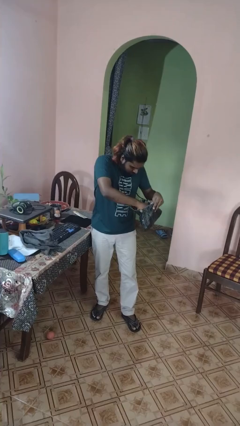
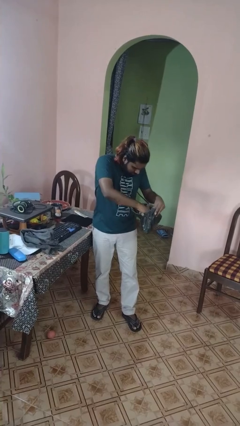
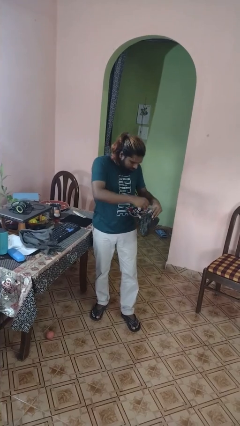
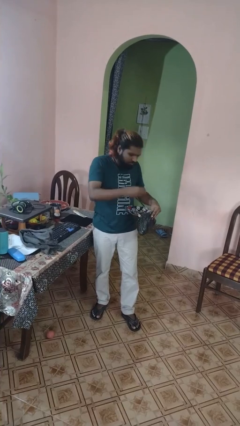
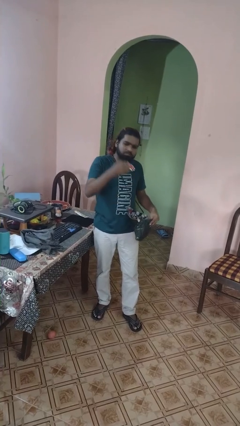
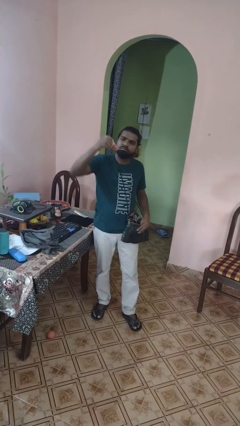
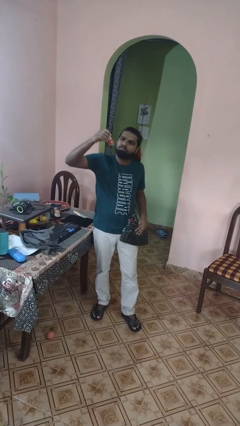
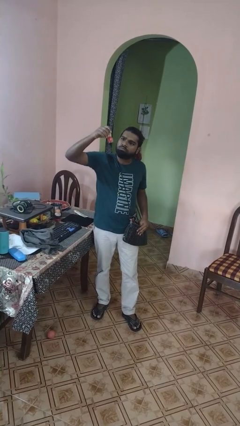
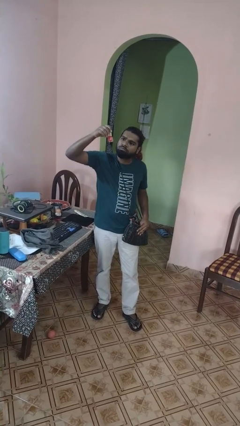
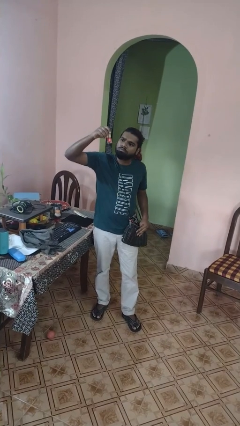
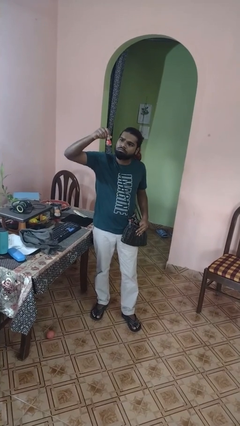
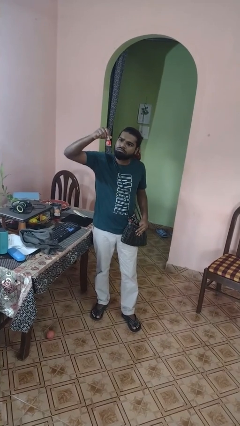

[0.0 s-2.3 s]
person takes object from purse

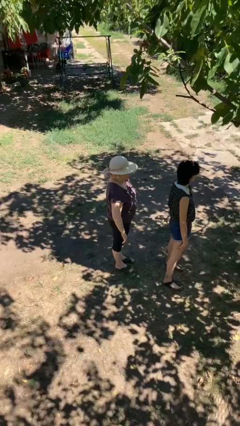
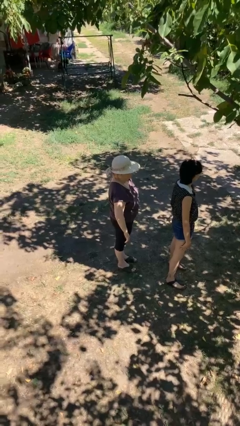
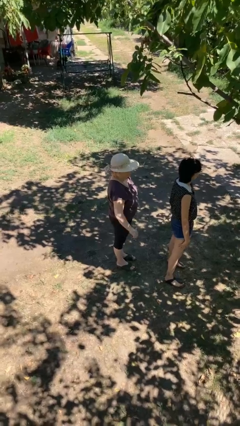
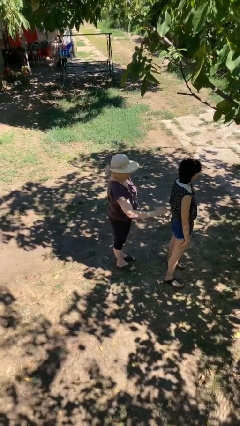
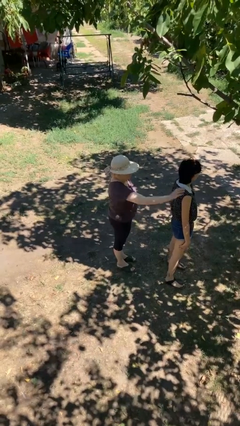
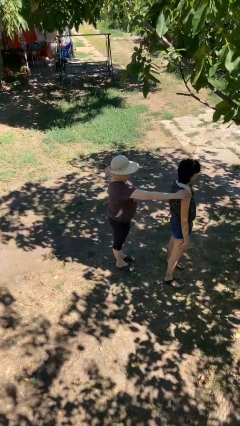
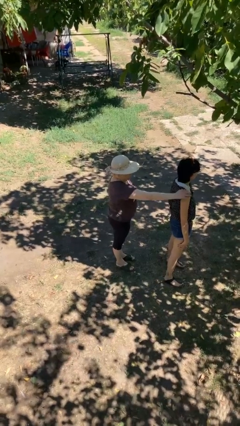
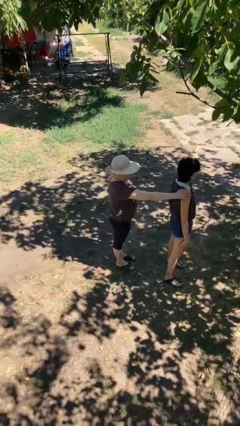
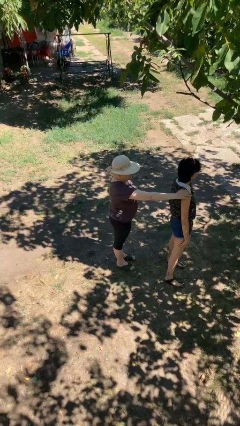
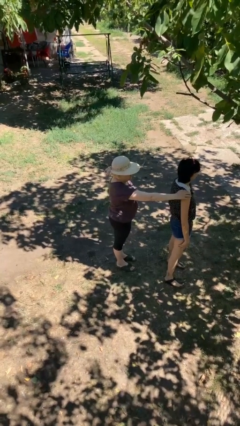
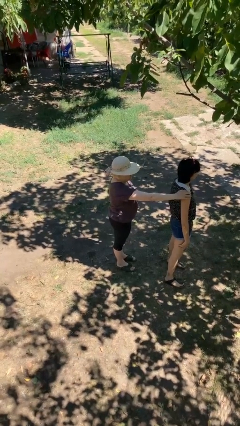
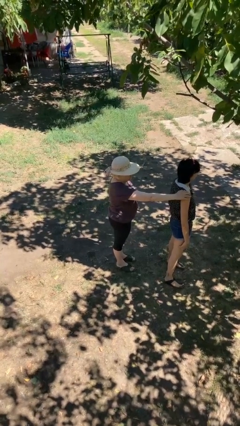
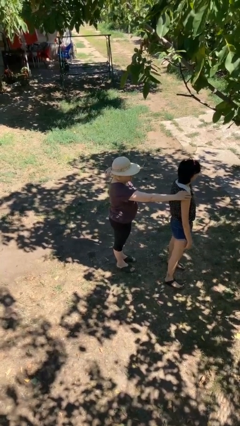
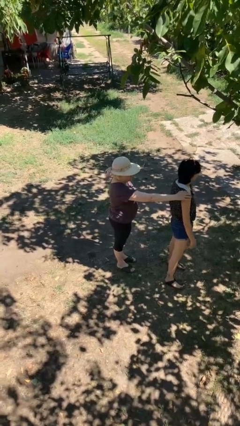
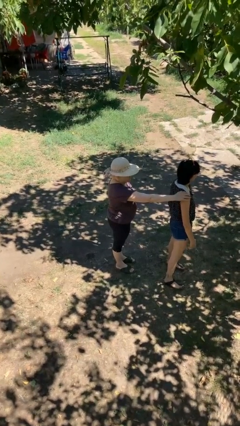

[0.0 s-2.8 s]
person grabs person by shoulder

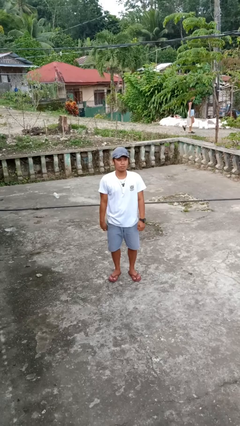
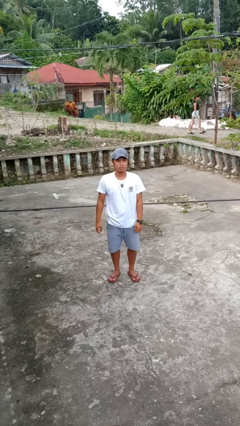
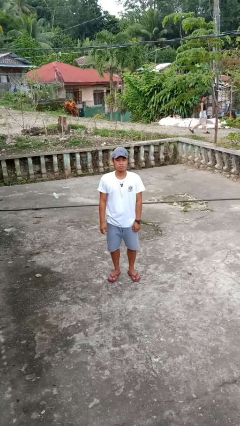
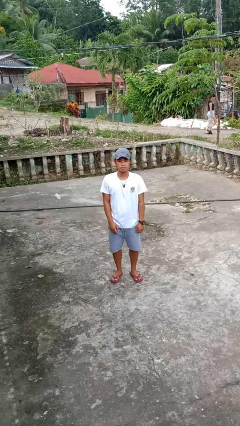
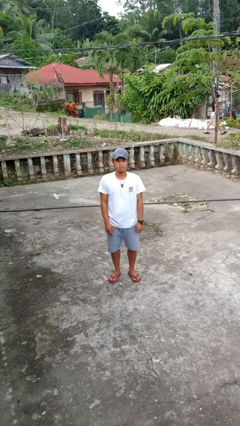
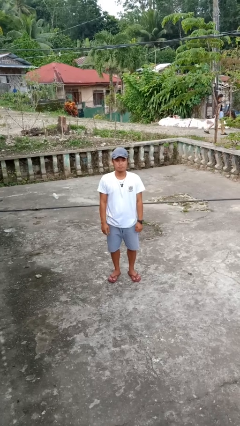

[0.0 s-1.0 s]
person punches

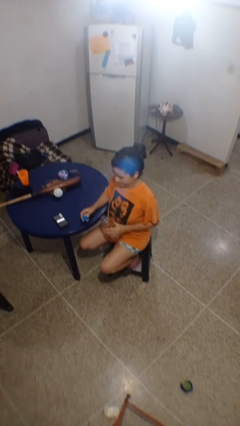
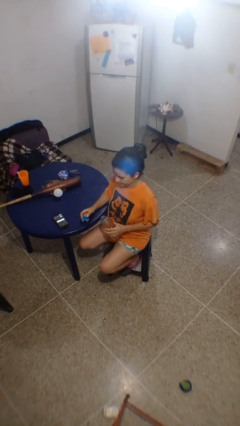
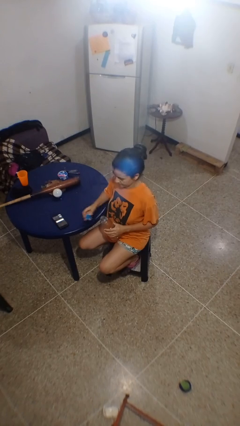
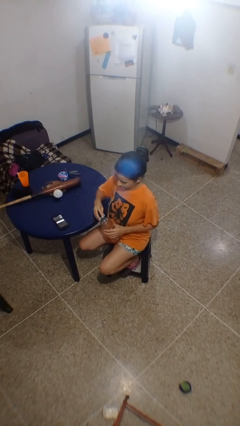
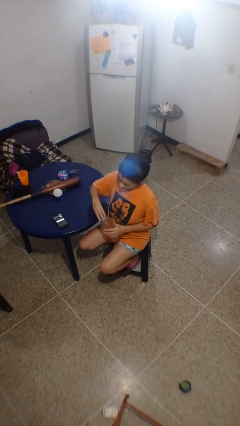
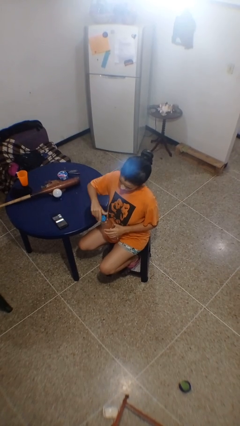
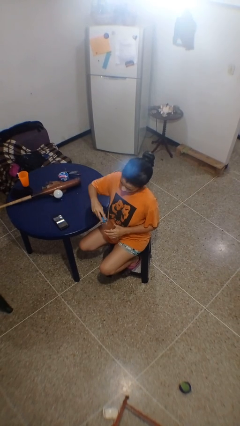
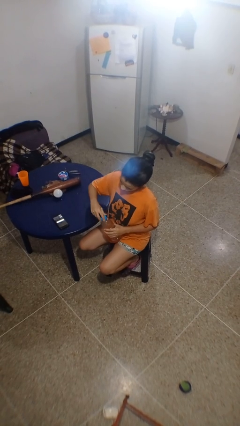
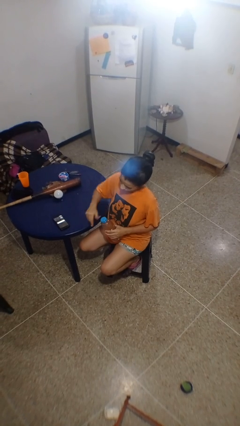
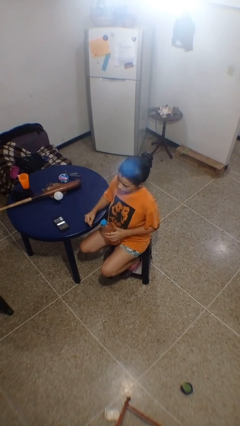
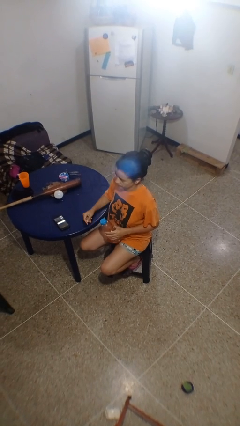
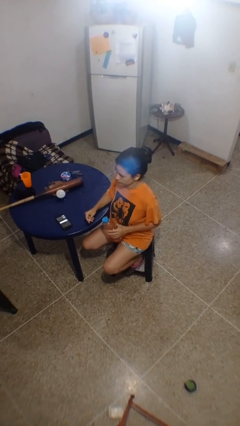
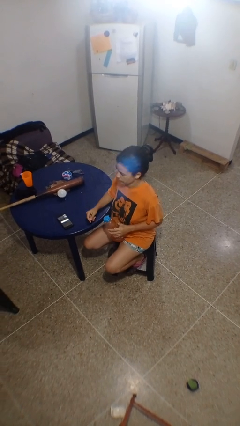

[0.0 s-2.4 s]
person screws lid to bottle

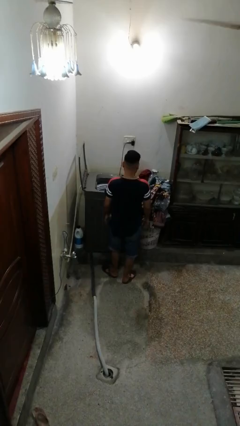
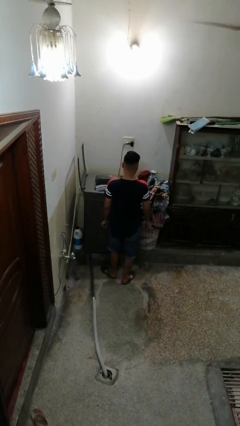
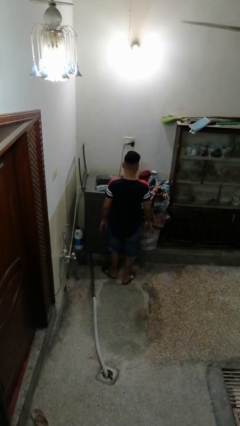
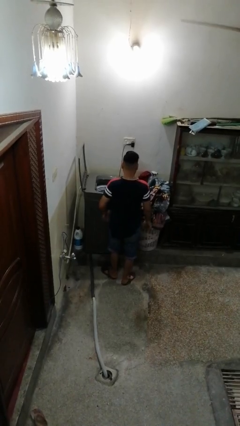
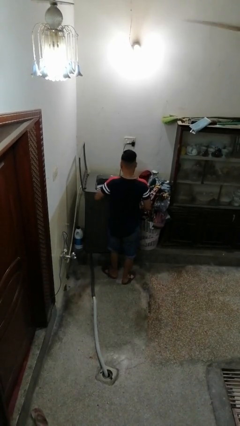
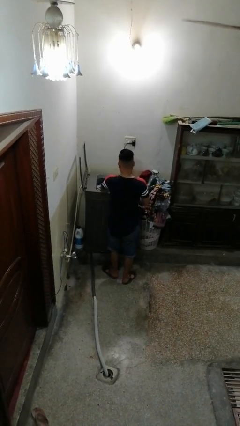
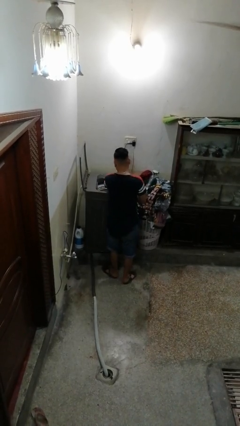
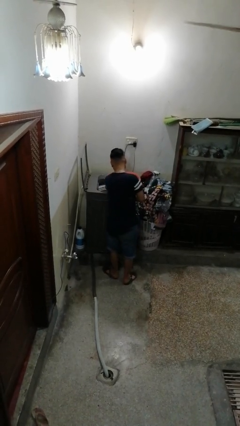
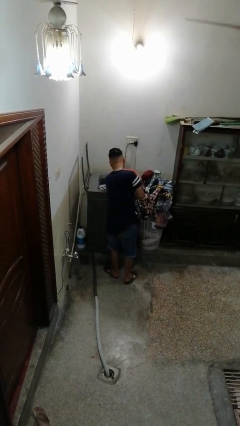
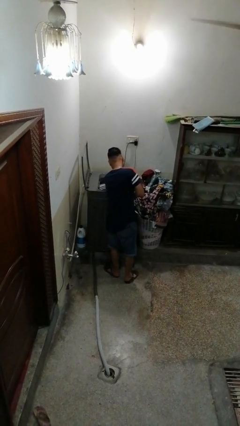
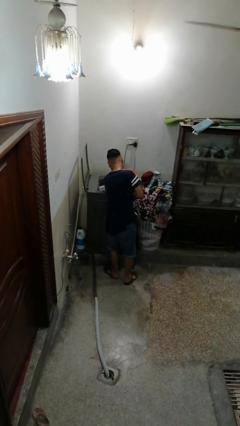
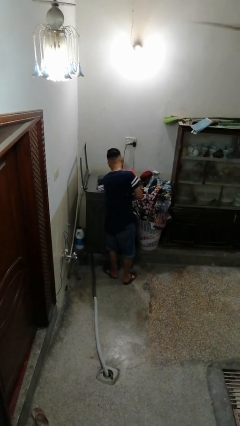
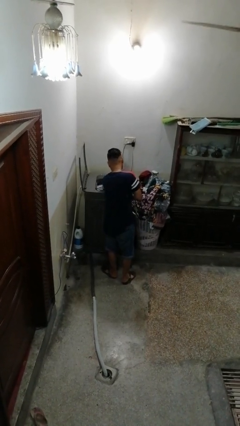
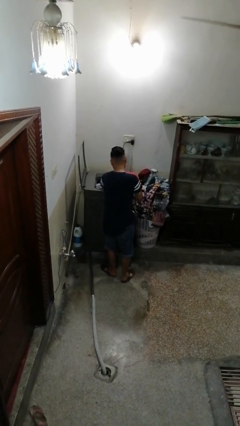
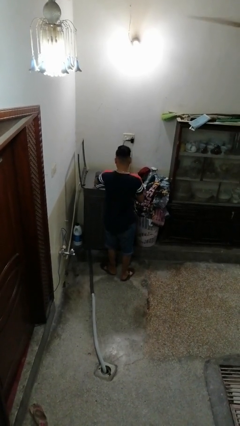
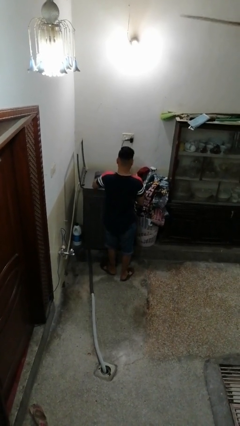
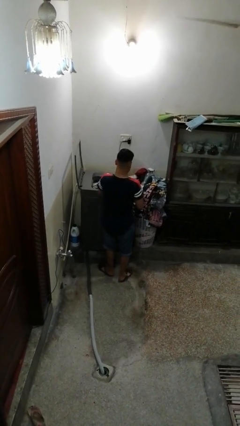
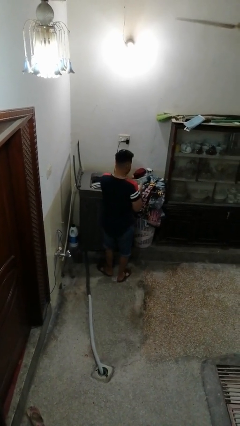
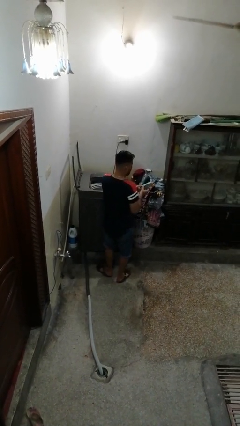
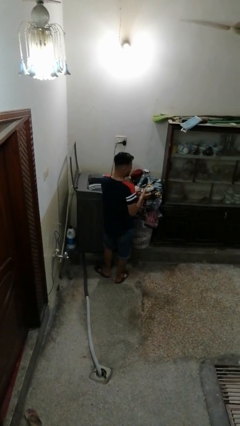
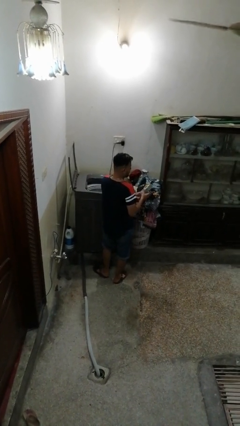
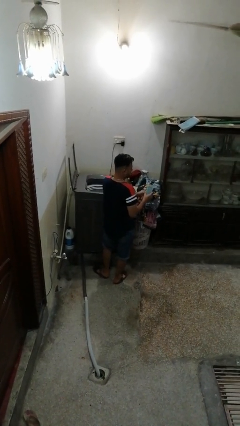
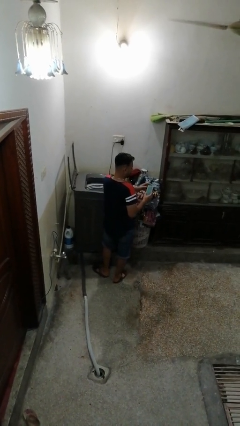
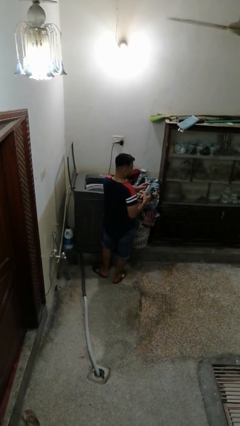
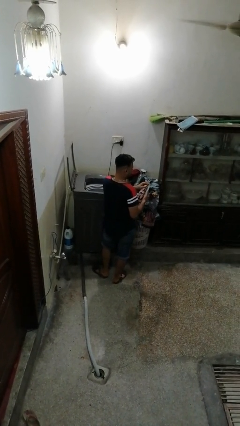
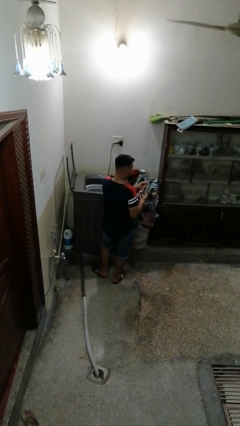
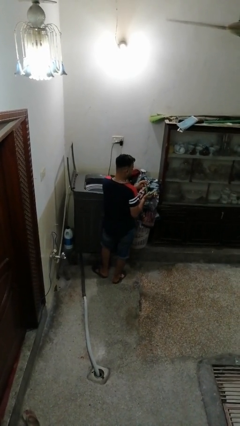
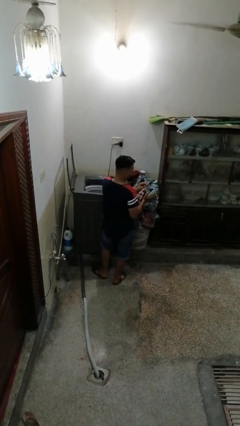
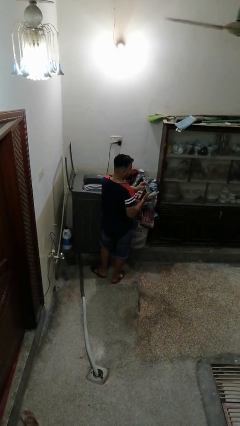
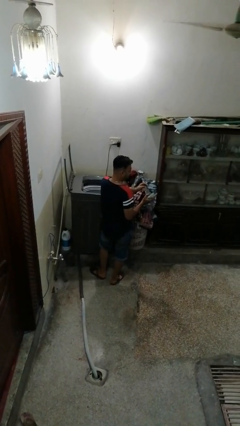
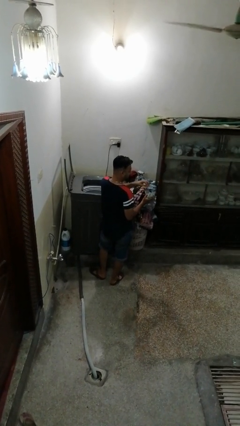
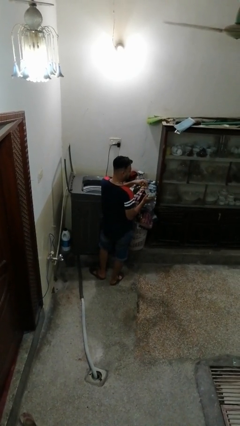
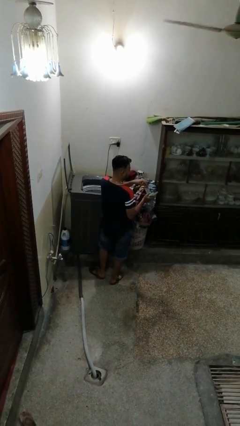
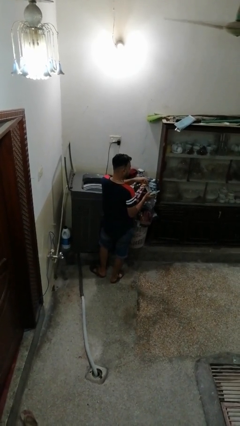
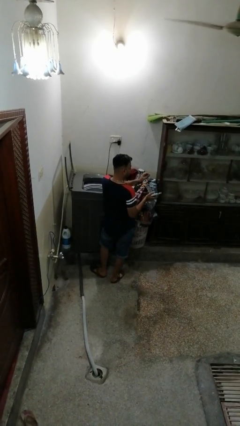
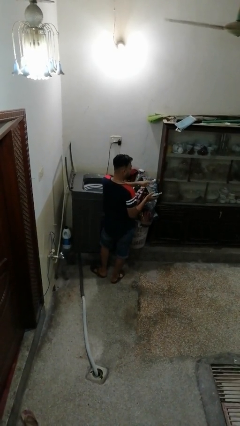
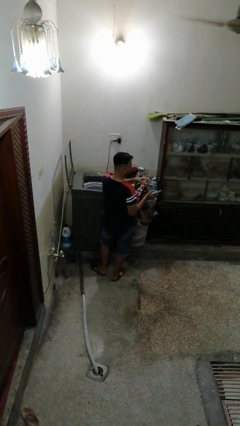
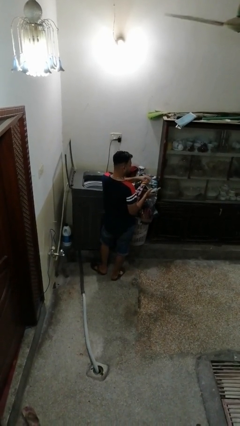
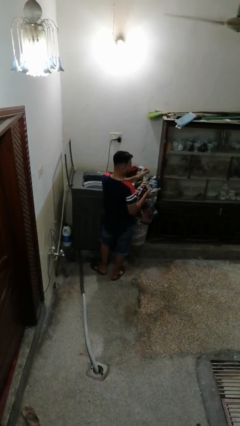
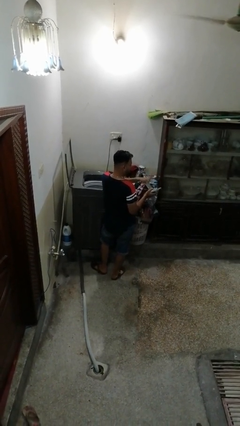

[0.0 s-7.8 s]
person cleans dryer lint trap

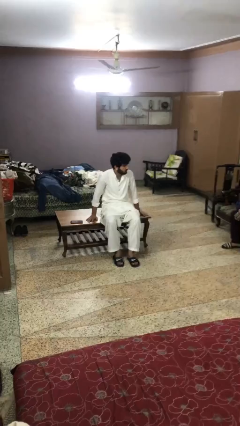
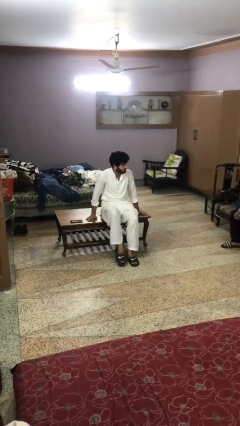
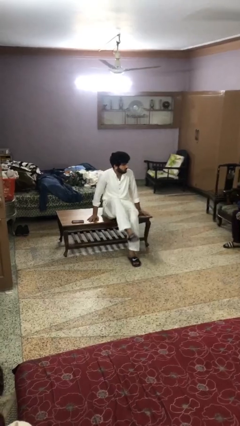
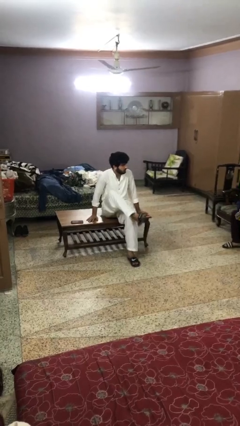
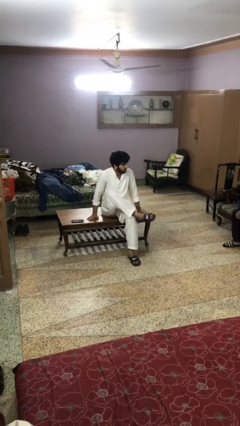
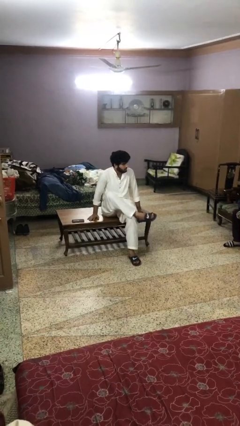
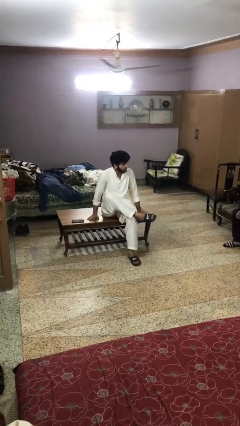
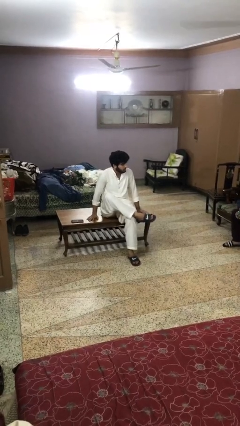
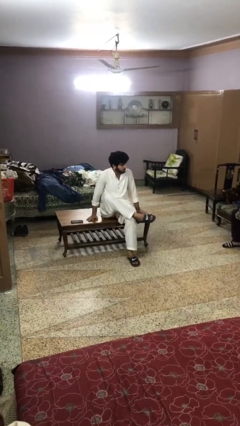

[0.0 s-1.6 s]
person crosses legs
